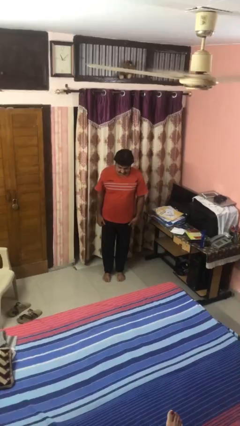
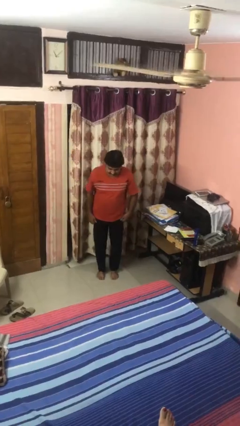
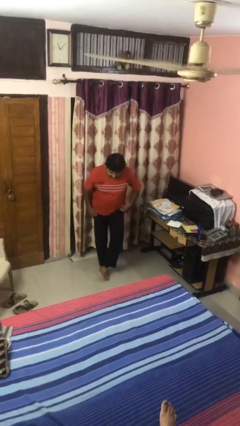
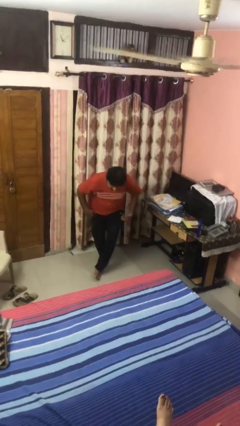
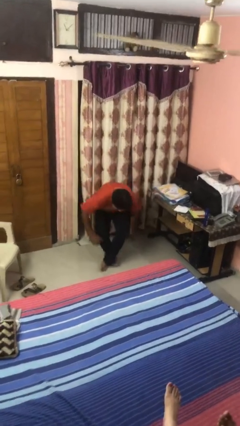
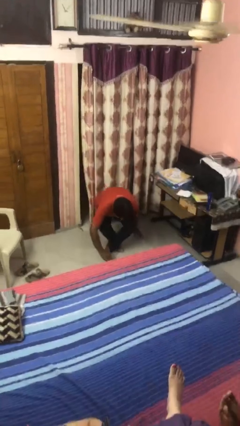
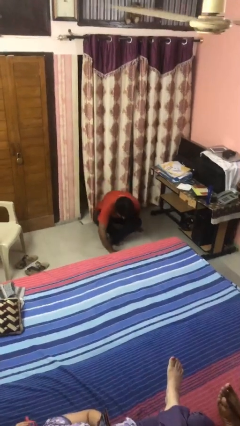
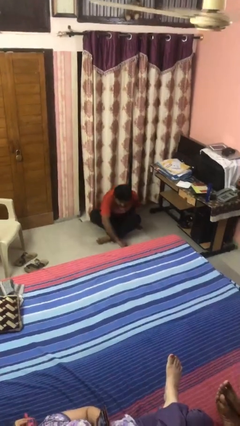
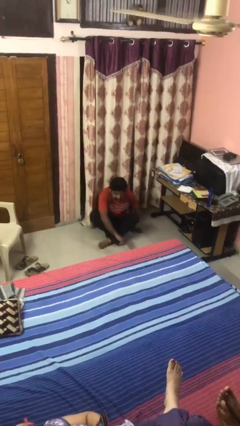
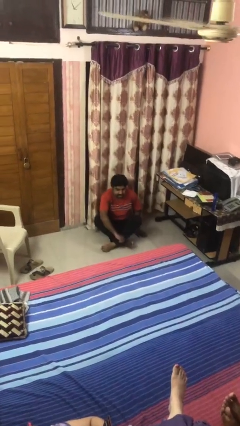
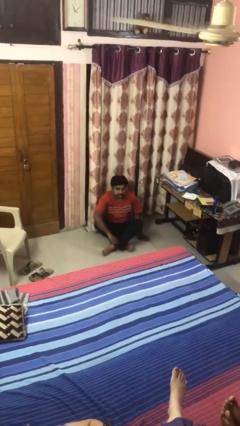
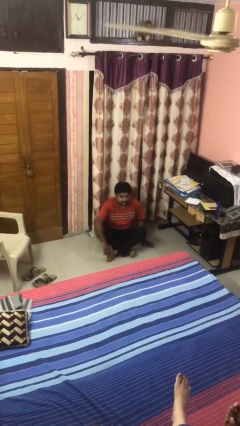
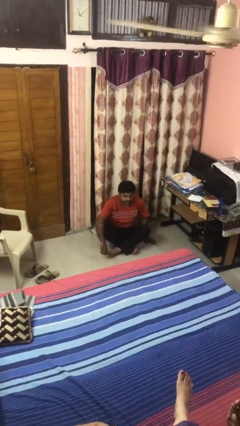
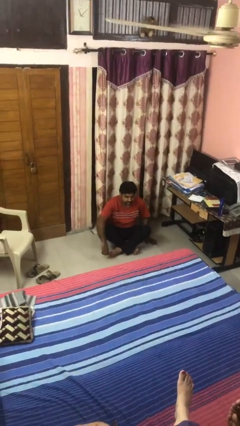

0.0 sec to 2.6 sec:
person sits crisscross

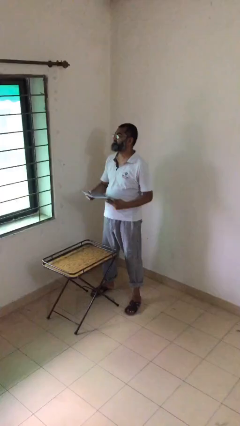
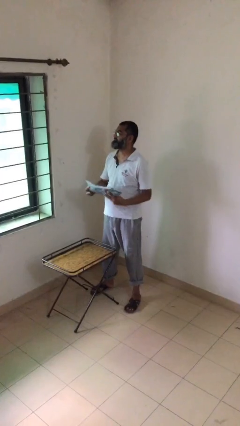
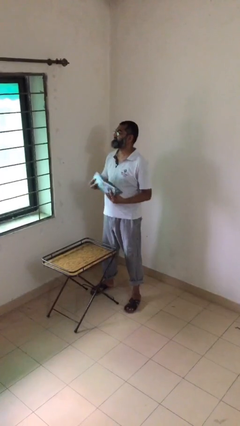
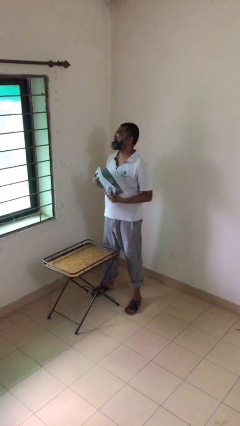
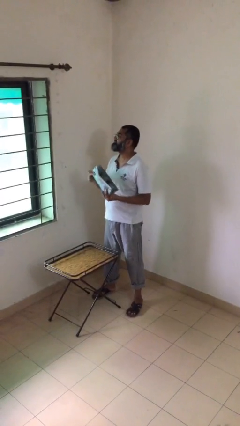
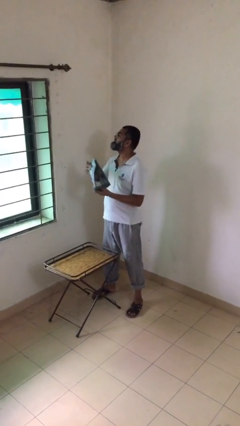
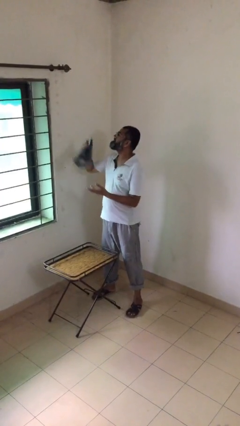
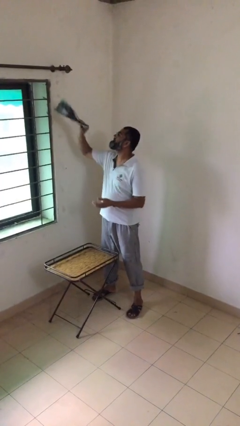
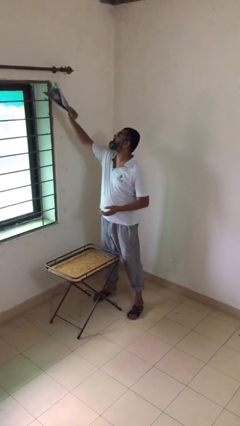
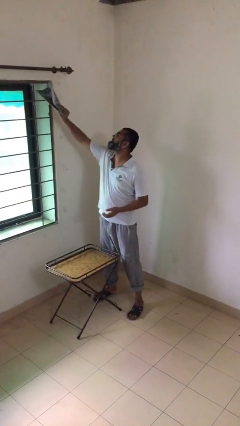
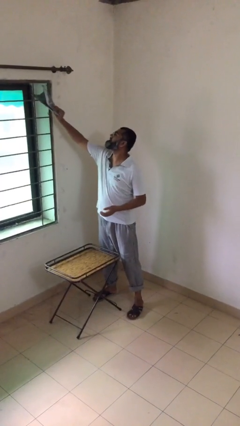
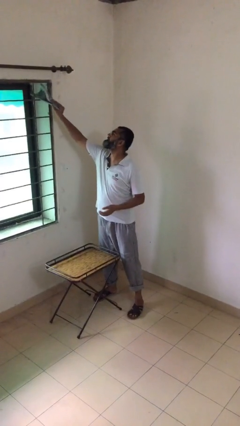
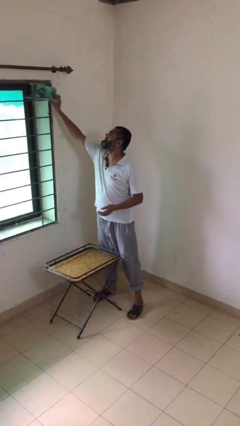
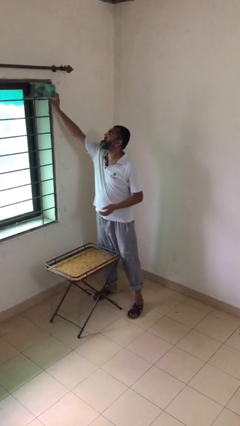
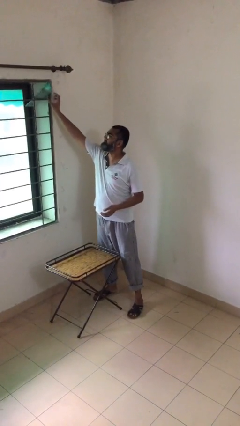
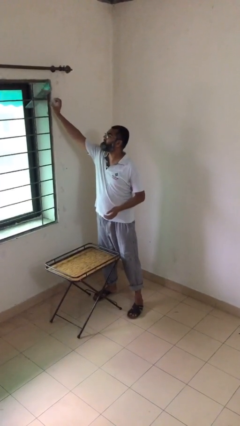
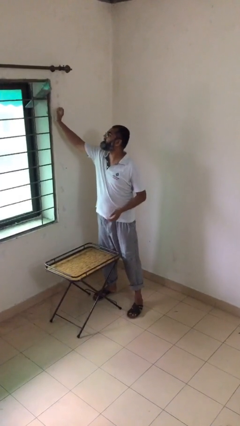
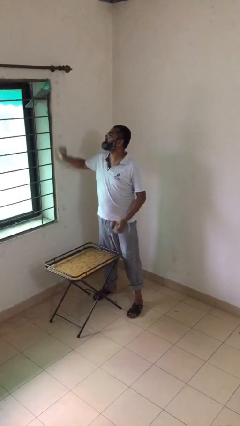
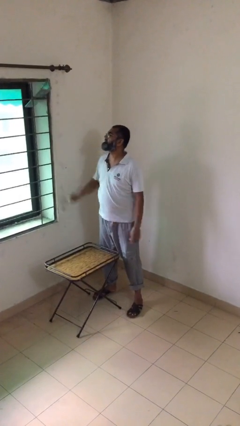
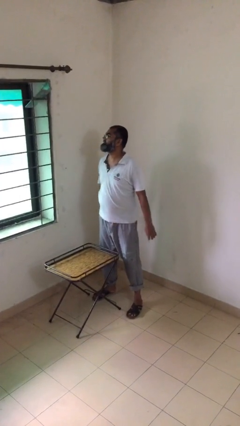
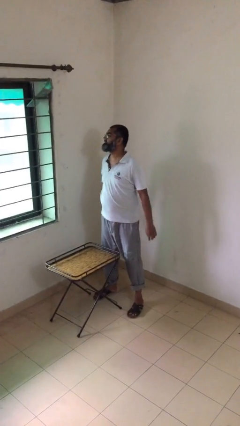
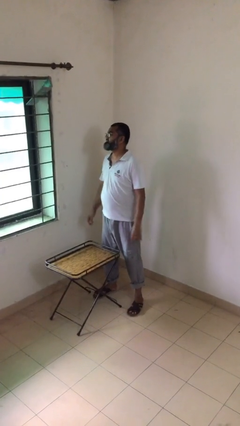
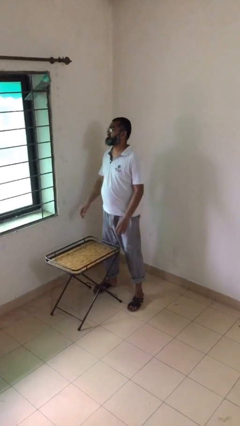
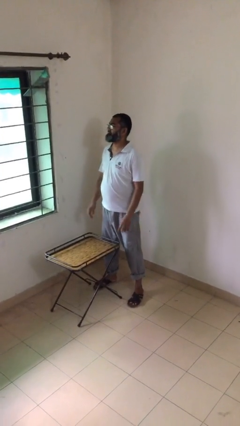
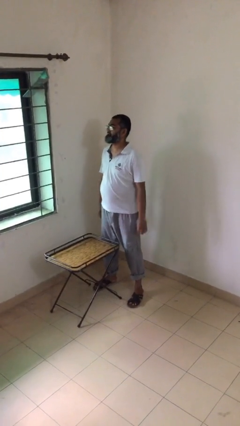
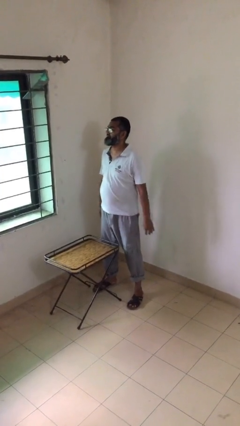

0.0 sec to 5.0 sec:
person puts down object on shelf

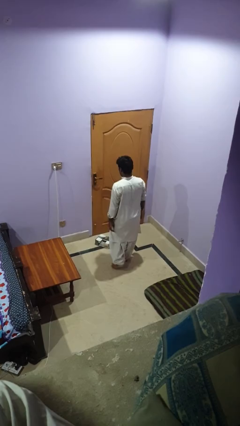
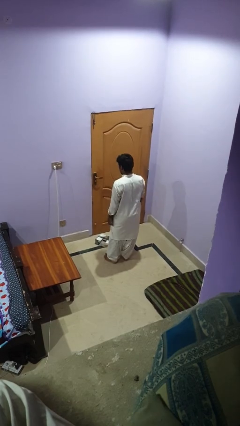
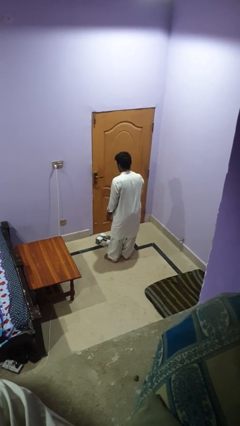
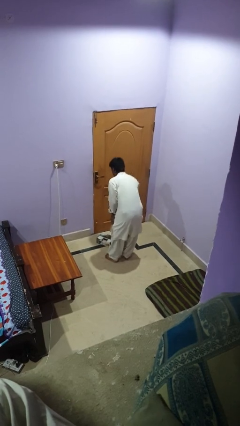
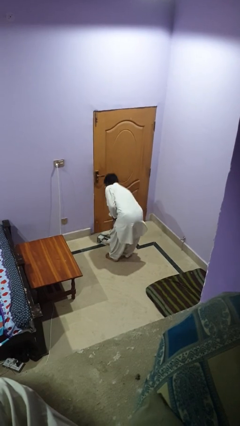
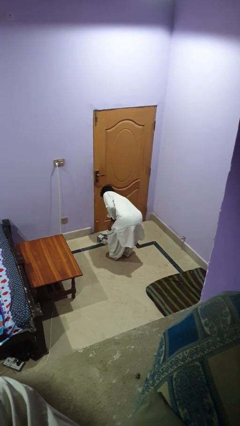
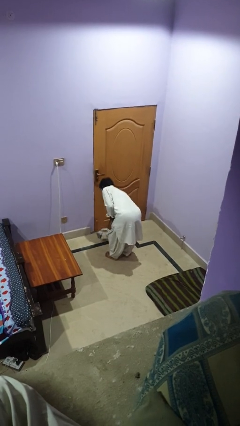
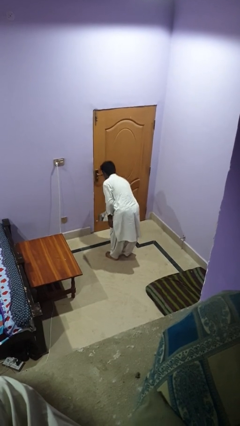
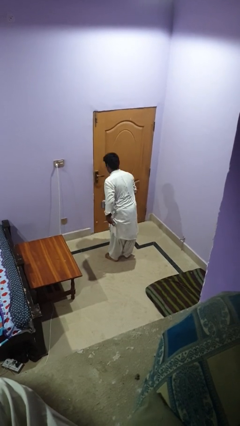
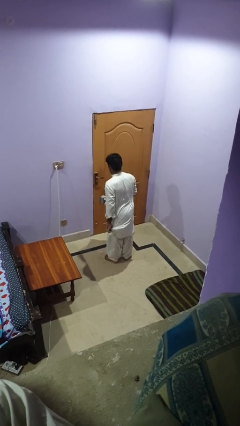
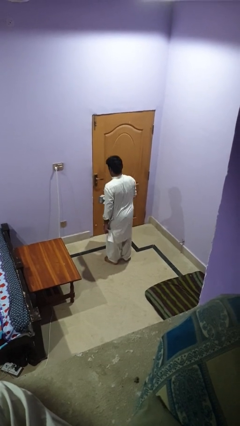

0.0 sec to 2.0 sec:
person picks up object from floor

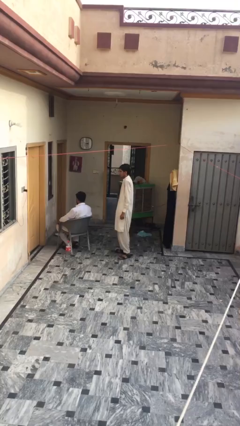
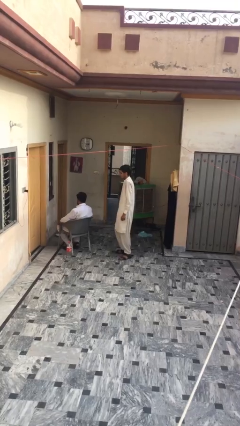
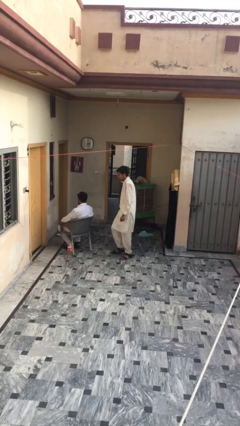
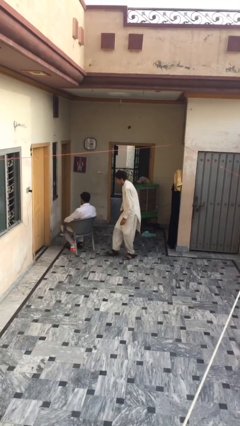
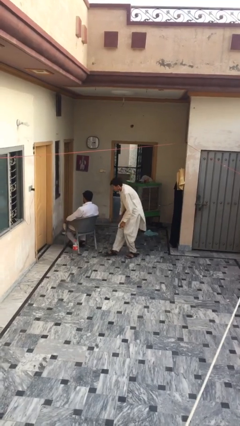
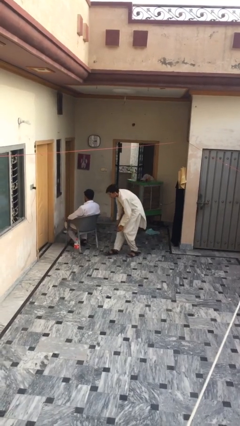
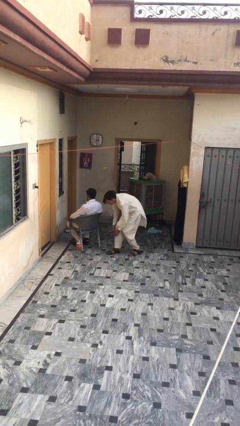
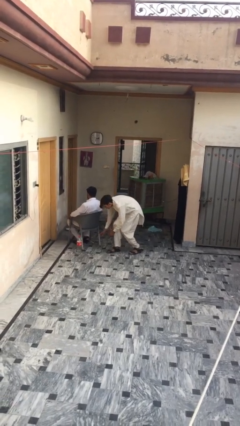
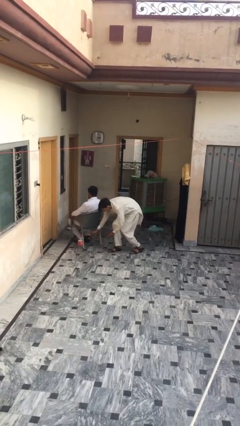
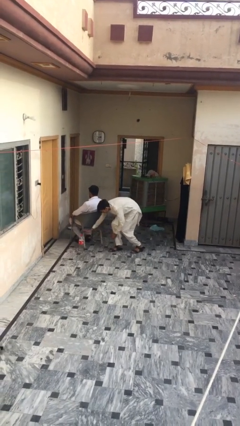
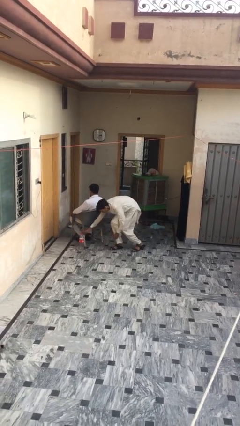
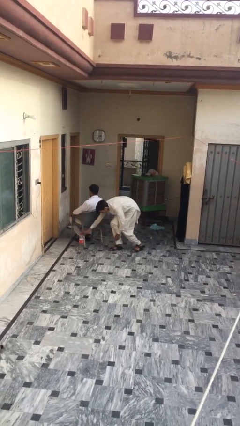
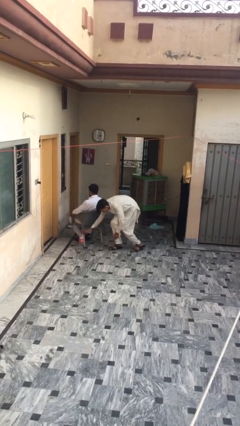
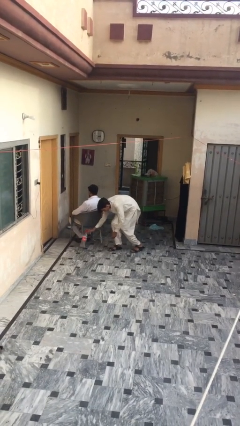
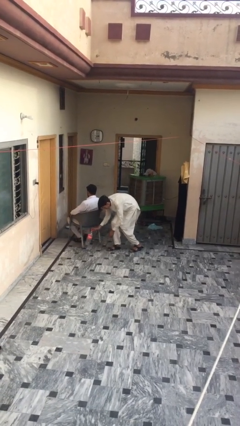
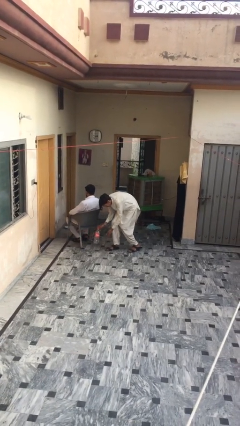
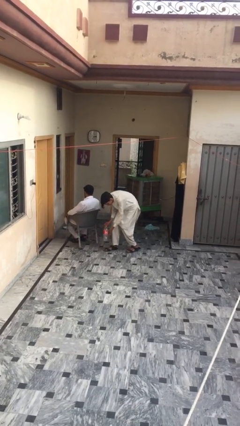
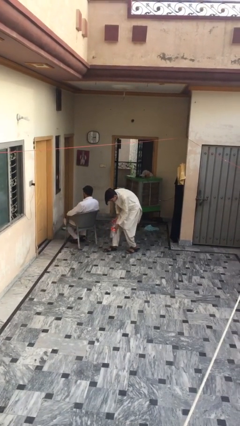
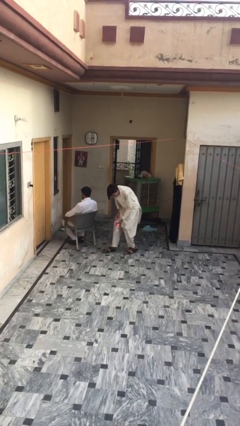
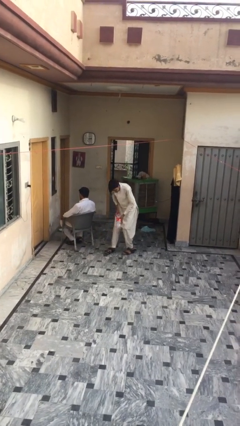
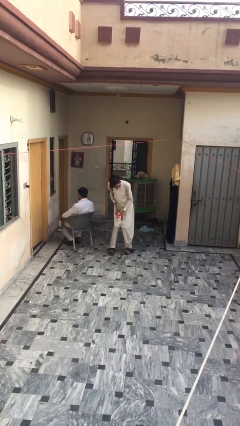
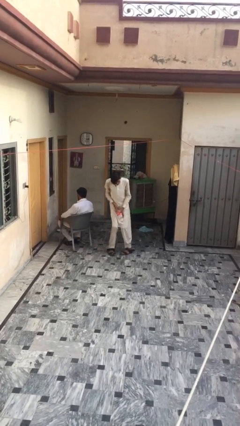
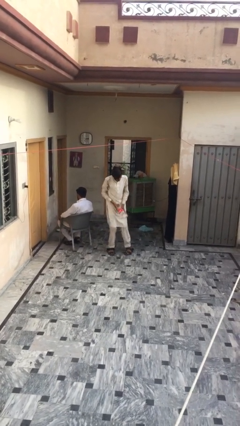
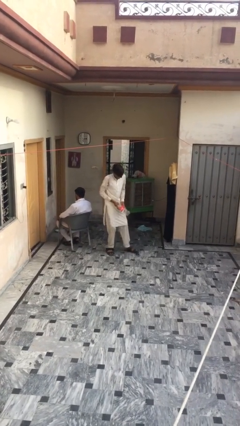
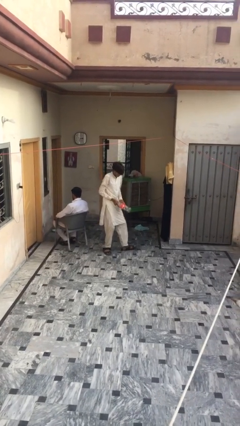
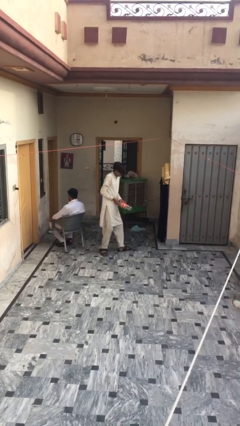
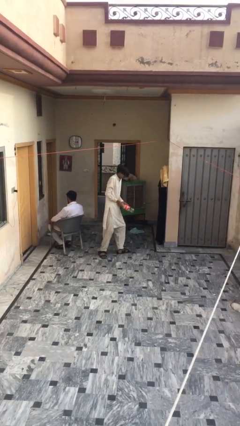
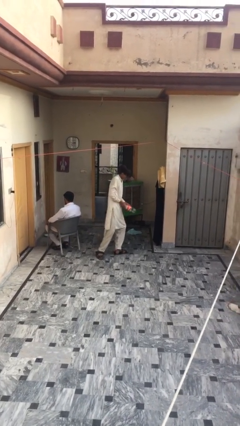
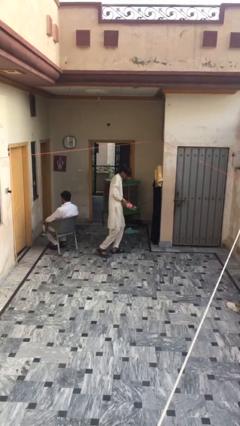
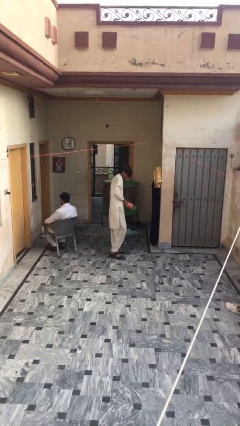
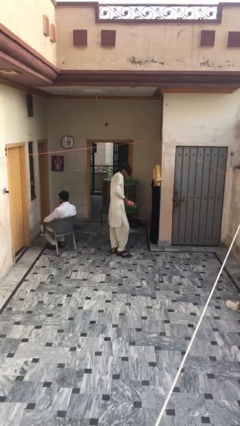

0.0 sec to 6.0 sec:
person steals object from person

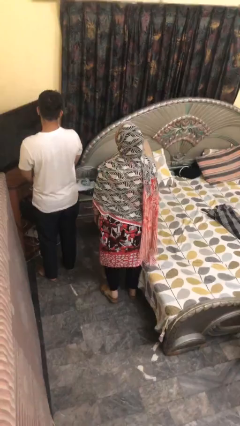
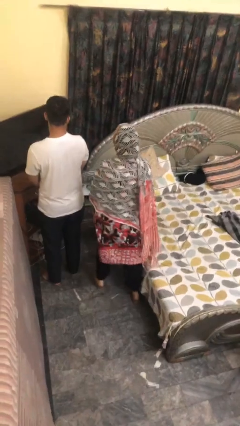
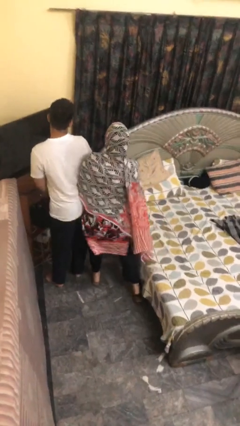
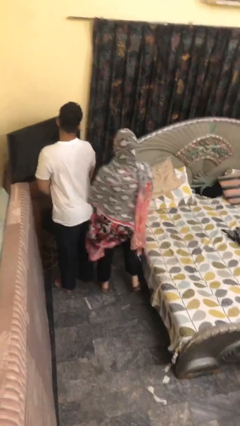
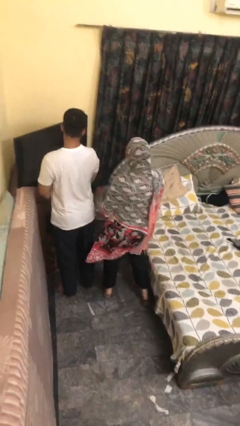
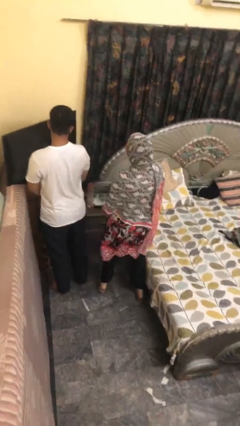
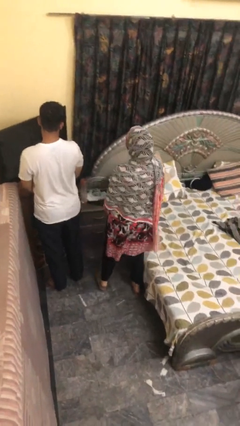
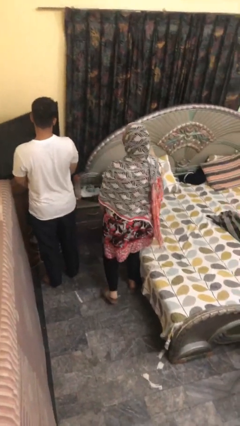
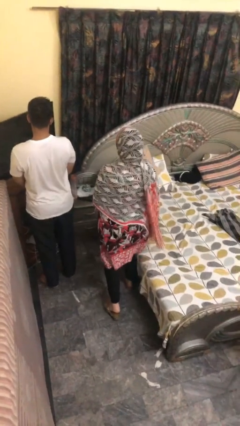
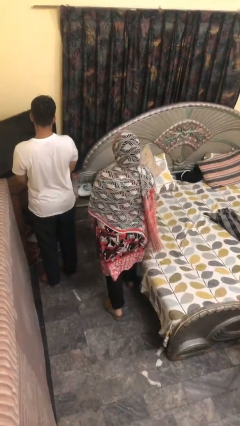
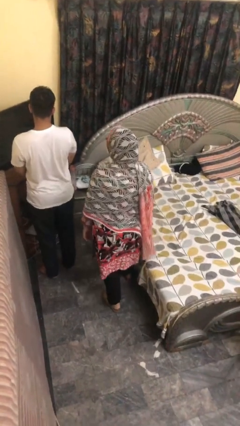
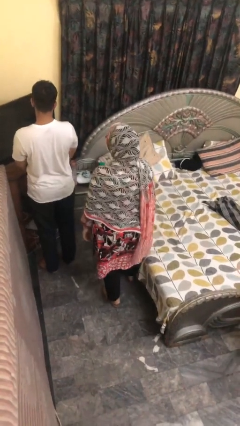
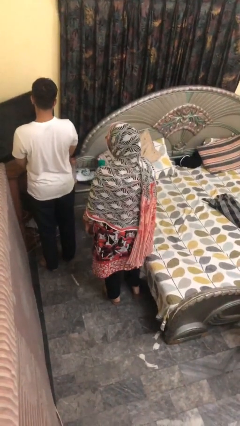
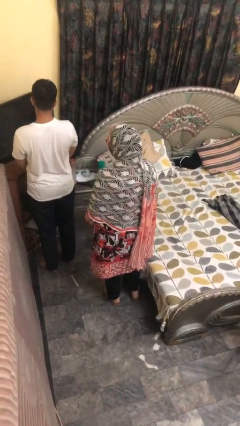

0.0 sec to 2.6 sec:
person bumps into person
